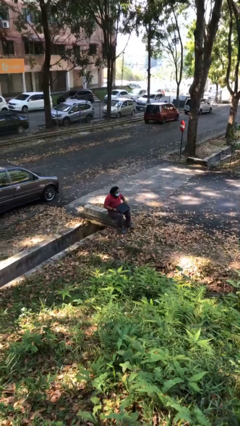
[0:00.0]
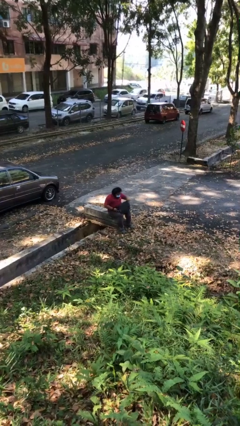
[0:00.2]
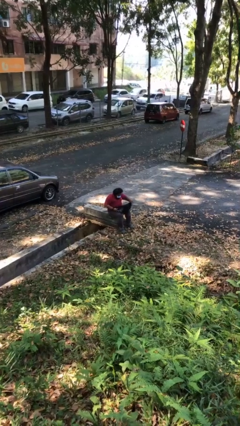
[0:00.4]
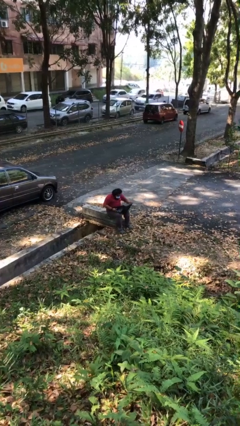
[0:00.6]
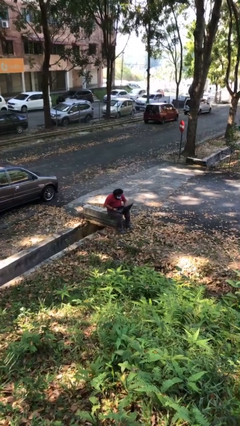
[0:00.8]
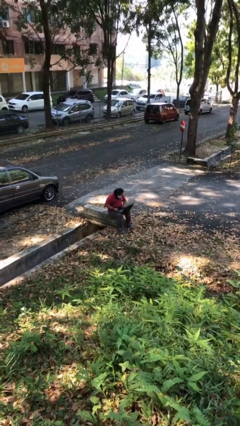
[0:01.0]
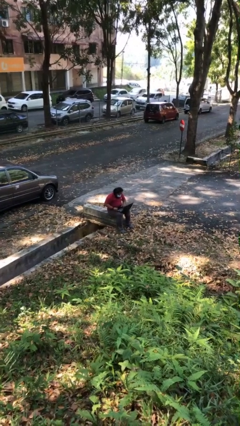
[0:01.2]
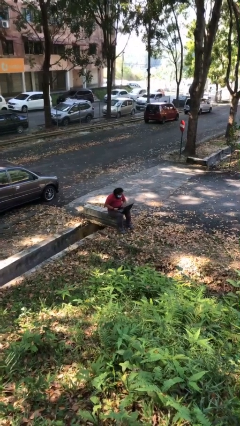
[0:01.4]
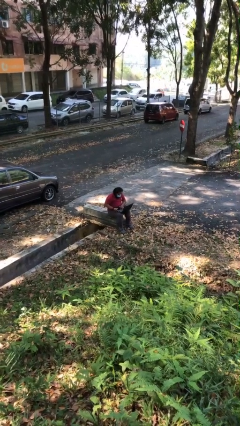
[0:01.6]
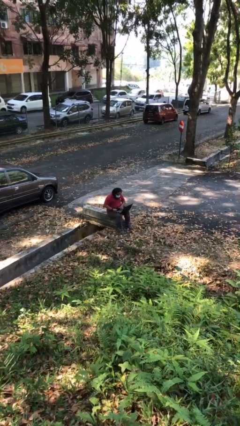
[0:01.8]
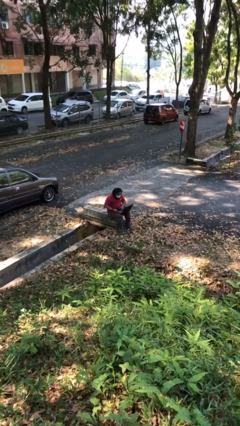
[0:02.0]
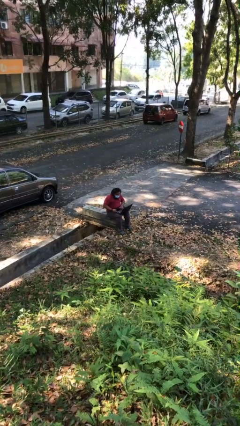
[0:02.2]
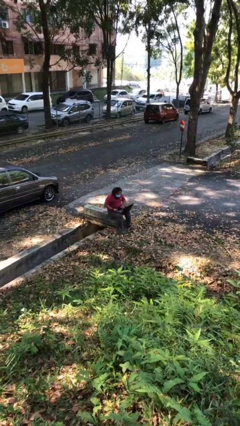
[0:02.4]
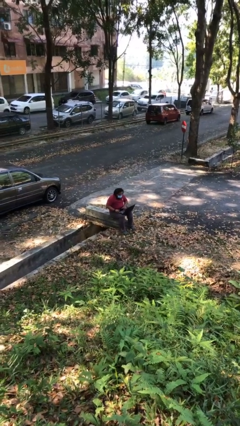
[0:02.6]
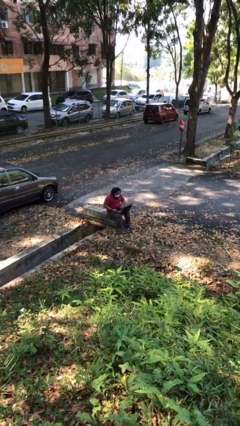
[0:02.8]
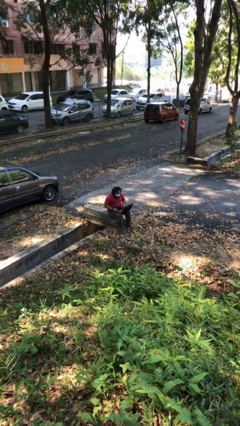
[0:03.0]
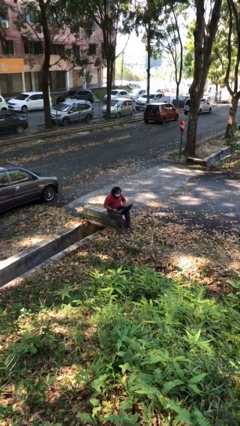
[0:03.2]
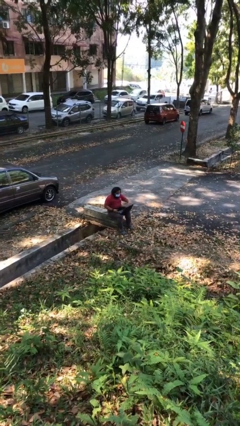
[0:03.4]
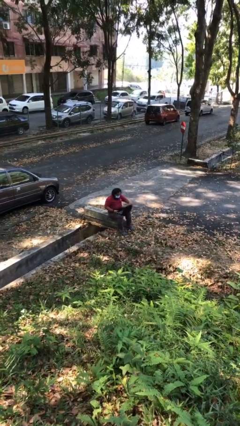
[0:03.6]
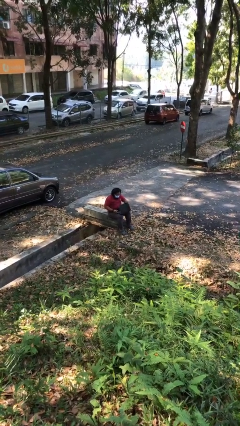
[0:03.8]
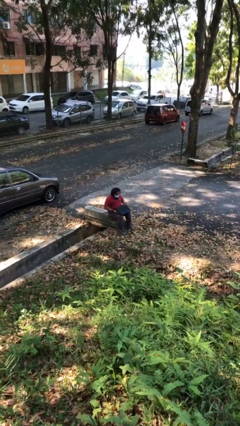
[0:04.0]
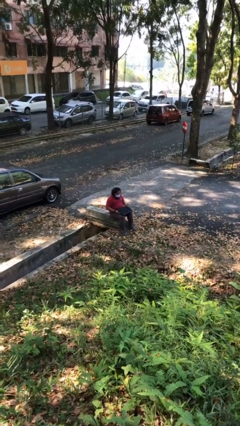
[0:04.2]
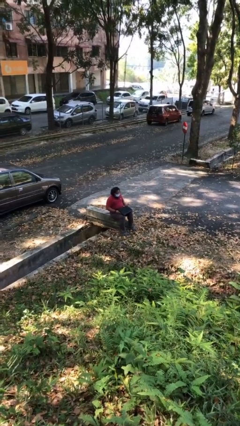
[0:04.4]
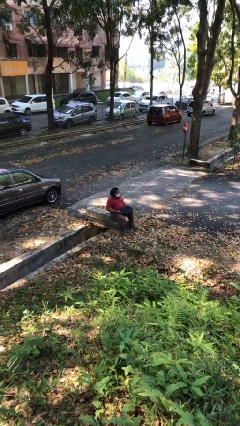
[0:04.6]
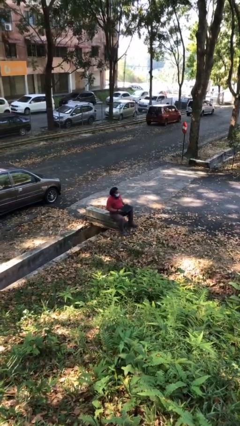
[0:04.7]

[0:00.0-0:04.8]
person interacts with laptop

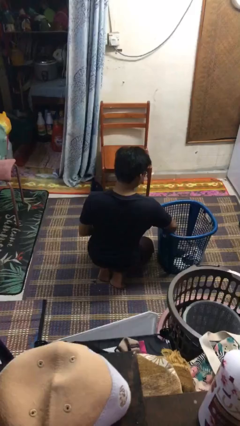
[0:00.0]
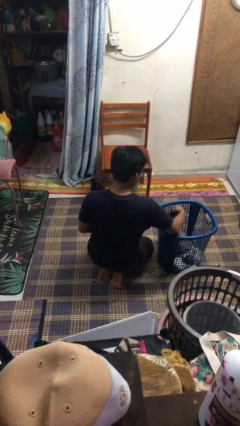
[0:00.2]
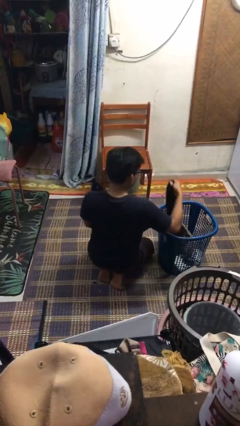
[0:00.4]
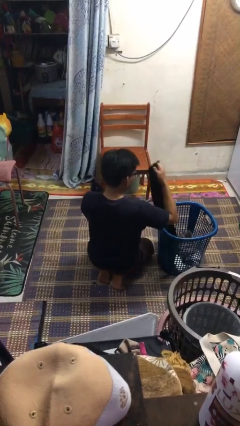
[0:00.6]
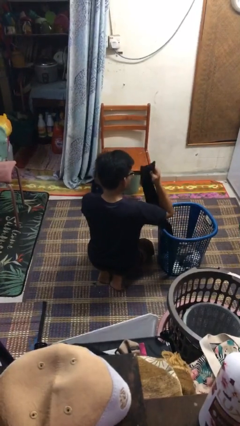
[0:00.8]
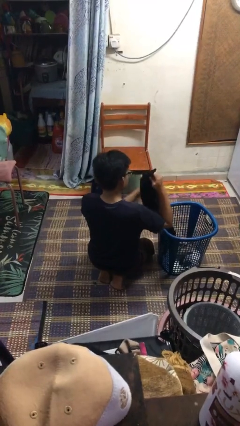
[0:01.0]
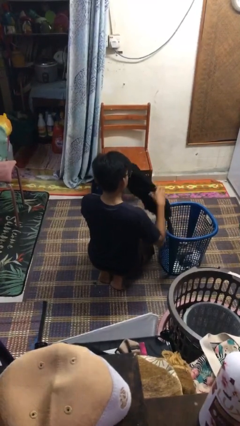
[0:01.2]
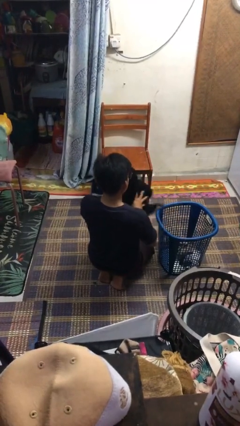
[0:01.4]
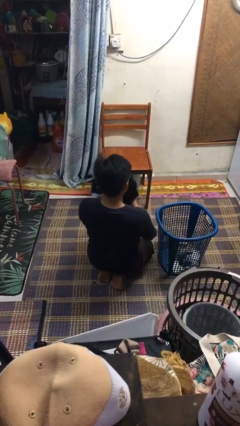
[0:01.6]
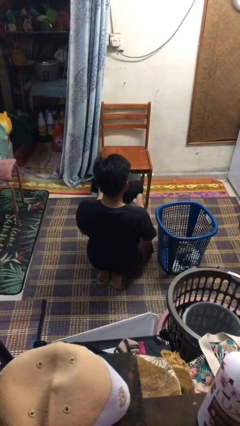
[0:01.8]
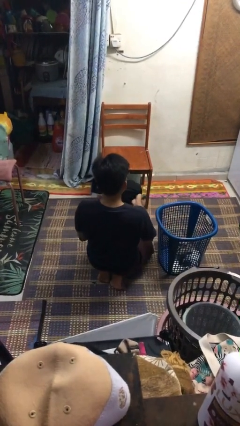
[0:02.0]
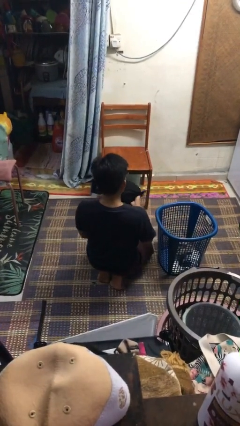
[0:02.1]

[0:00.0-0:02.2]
person takes object from basket

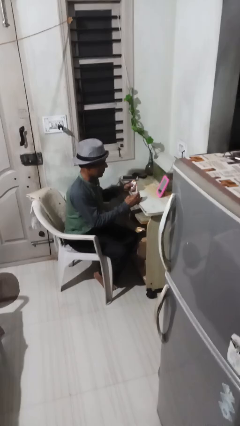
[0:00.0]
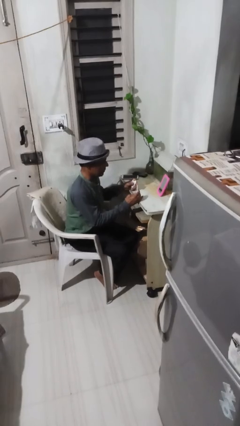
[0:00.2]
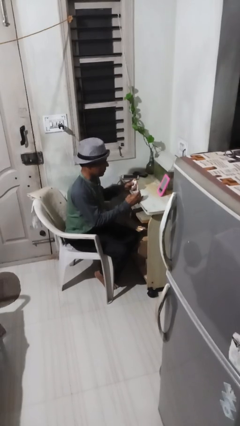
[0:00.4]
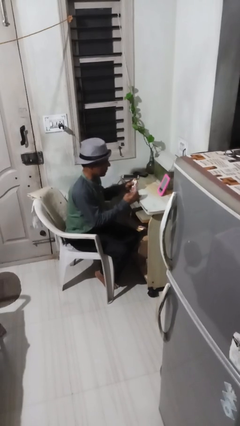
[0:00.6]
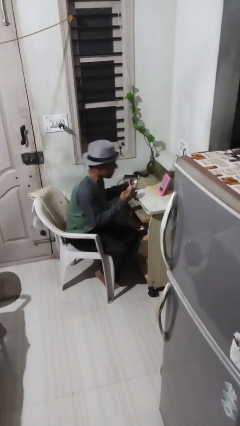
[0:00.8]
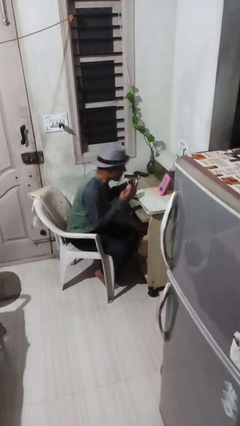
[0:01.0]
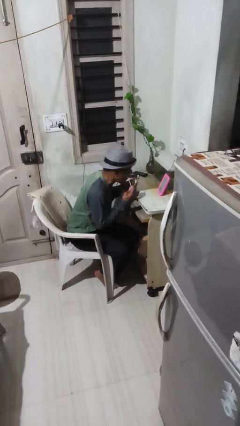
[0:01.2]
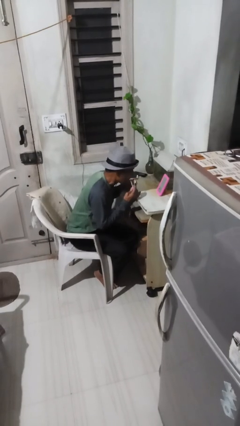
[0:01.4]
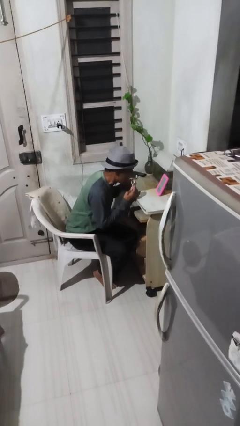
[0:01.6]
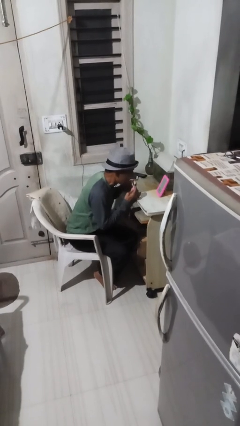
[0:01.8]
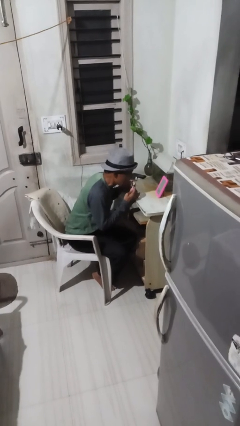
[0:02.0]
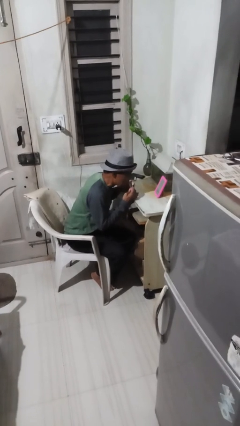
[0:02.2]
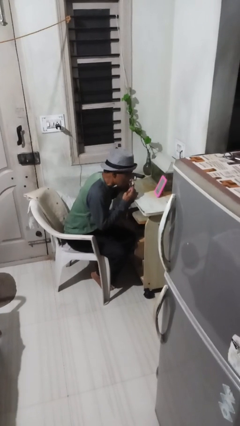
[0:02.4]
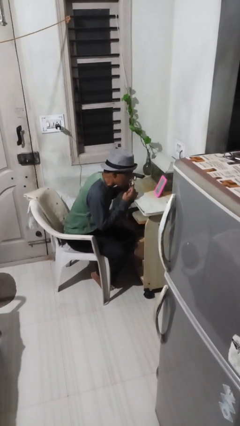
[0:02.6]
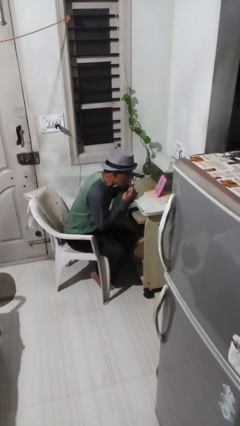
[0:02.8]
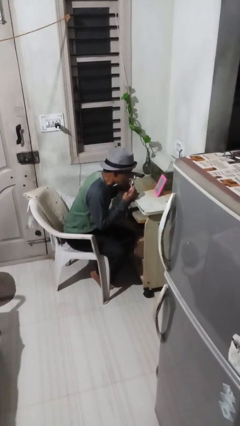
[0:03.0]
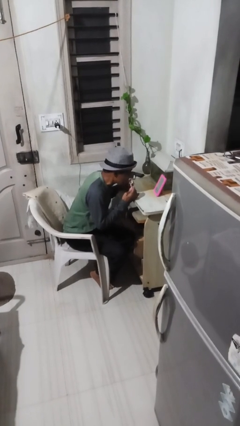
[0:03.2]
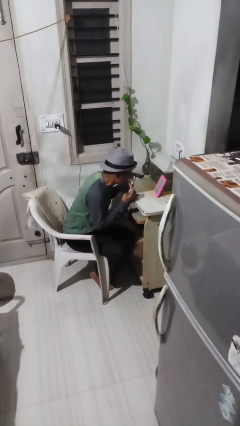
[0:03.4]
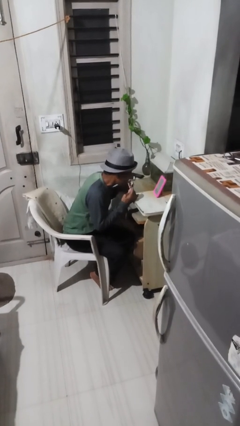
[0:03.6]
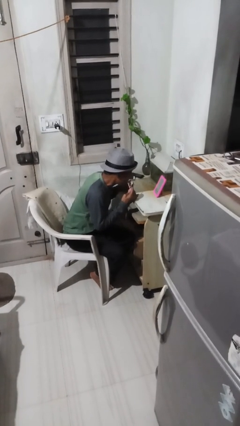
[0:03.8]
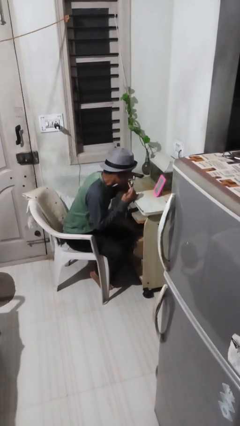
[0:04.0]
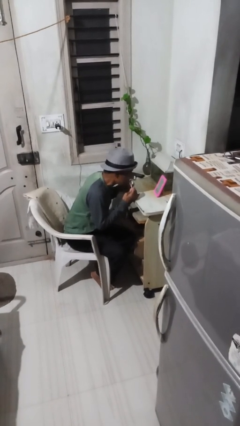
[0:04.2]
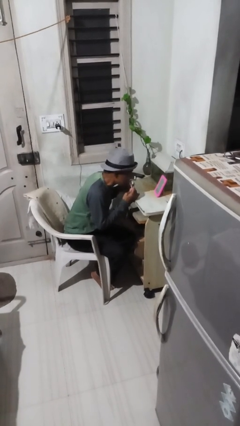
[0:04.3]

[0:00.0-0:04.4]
person applies lip makeup

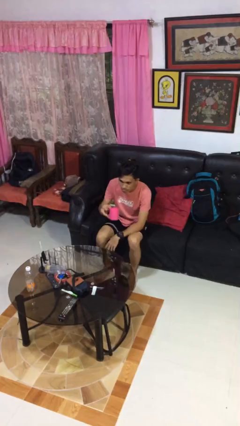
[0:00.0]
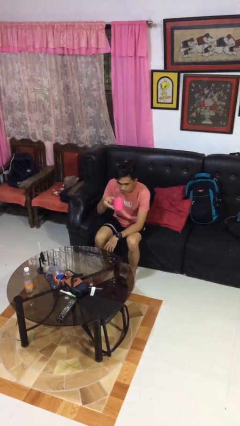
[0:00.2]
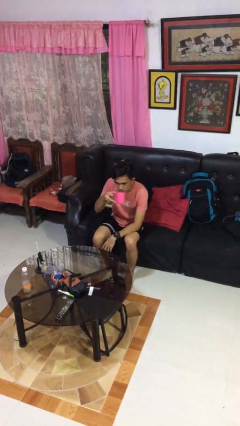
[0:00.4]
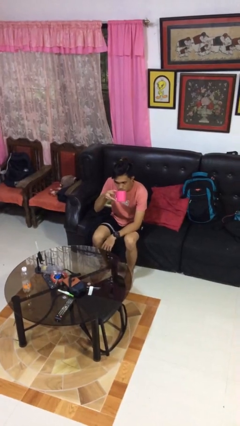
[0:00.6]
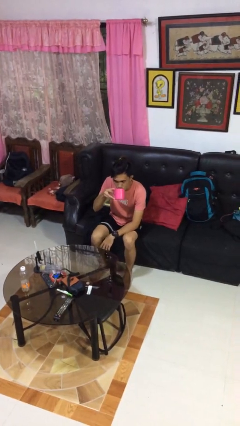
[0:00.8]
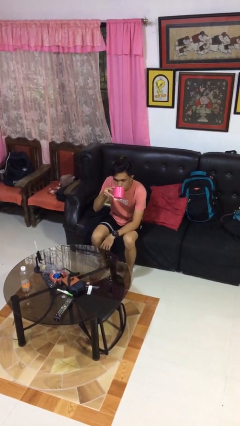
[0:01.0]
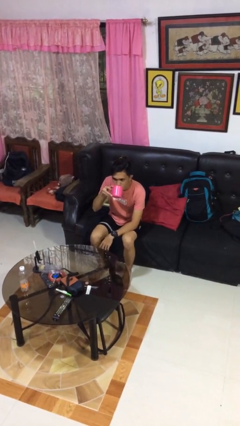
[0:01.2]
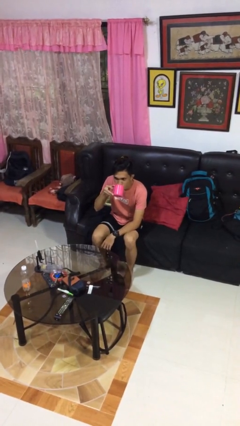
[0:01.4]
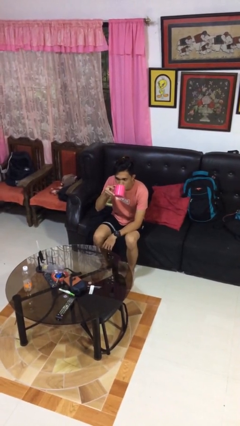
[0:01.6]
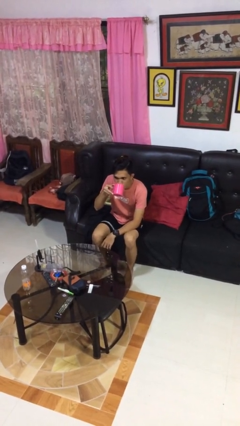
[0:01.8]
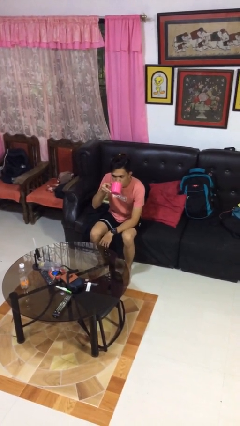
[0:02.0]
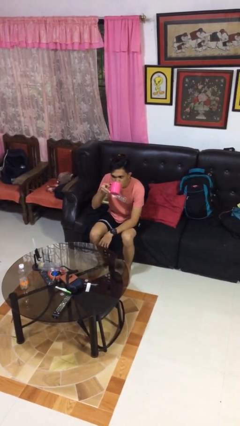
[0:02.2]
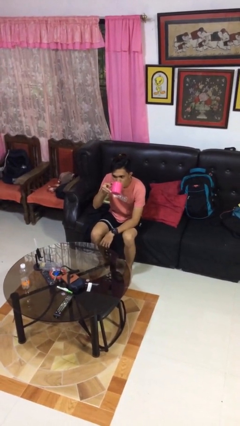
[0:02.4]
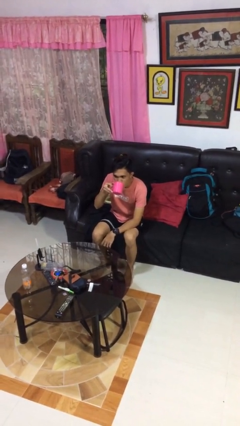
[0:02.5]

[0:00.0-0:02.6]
person drinks from mug

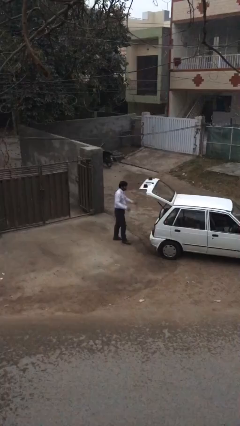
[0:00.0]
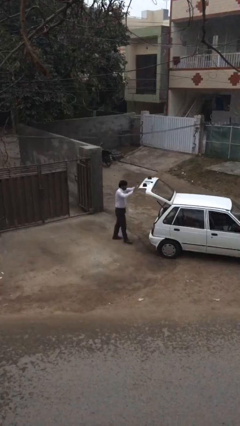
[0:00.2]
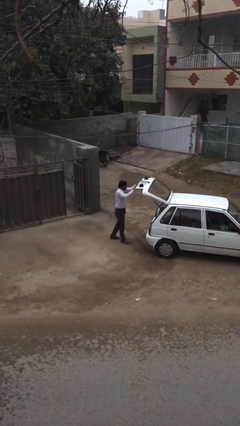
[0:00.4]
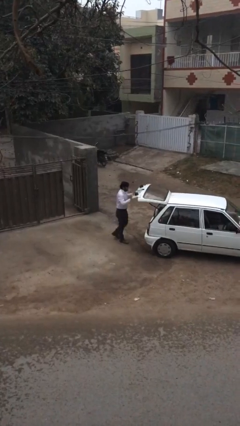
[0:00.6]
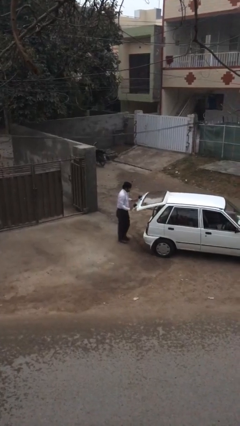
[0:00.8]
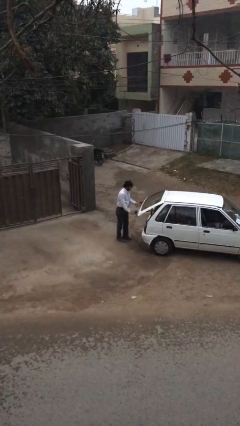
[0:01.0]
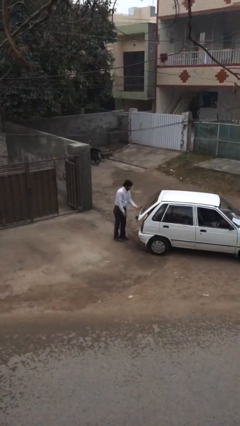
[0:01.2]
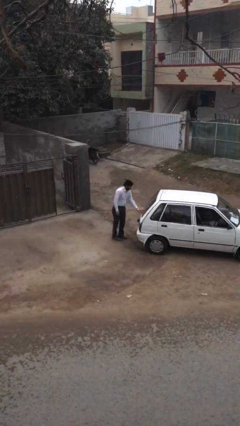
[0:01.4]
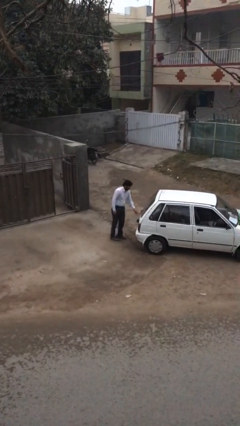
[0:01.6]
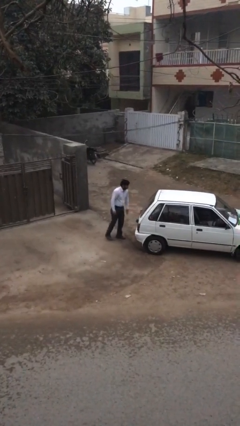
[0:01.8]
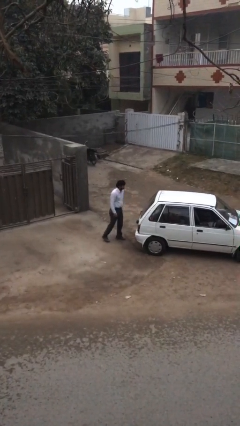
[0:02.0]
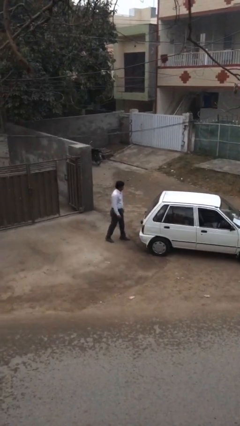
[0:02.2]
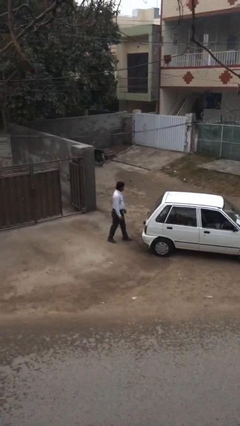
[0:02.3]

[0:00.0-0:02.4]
person closes car trunk

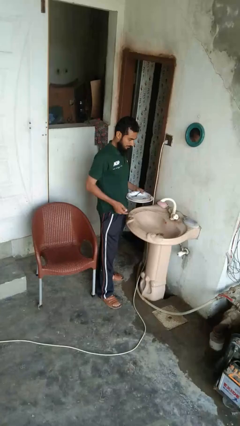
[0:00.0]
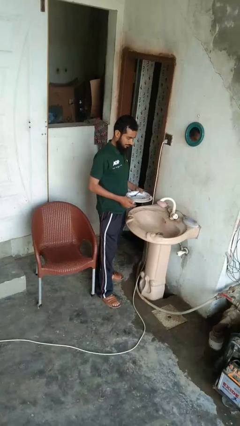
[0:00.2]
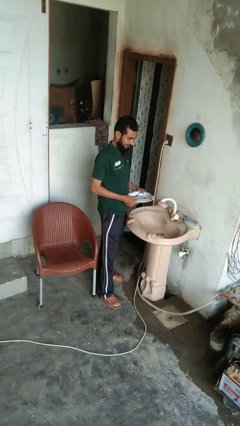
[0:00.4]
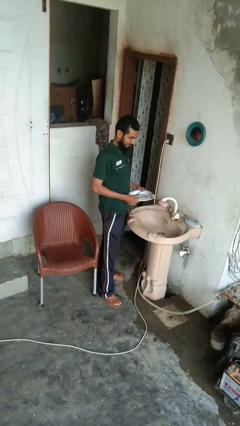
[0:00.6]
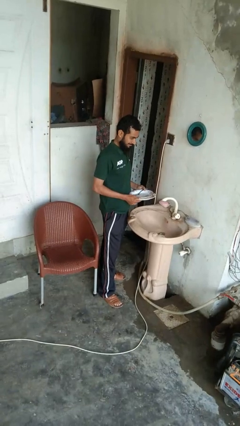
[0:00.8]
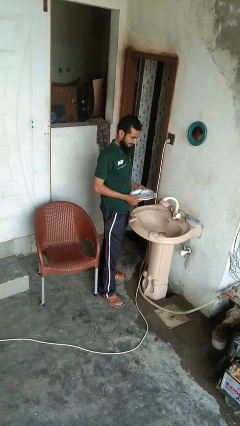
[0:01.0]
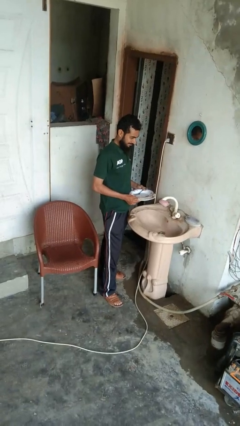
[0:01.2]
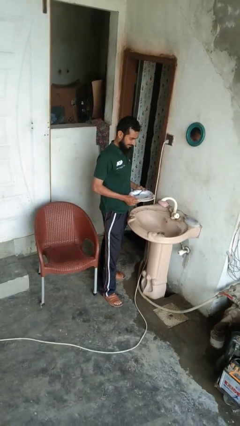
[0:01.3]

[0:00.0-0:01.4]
person loads dishwasher
